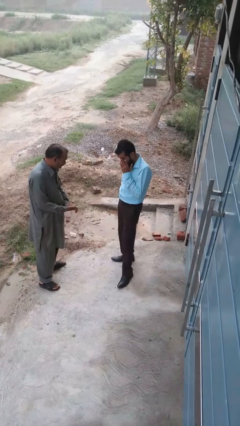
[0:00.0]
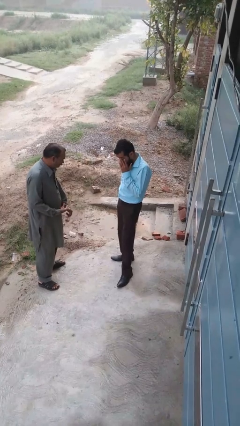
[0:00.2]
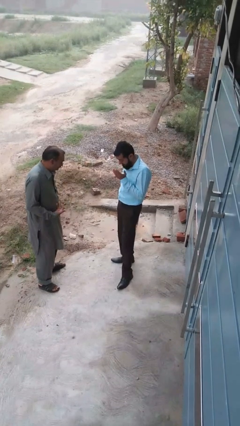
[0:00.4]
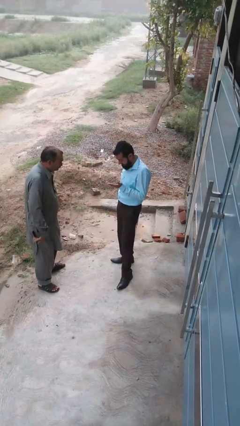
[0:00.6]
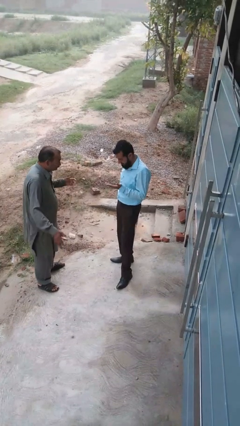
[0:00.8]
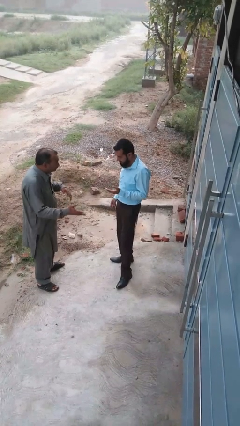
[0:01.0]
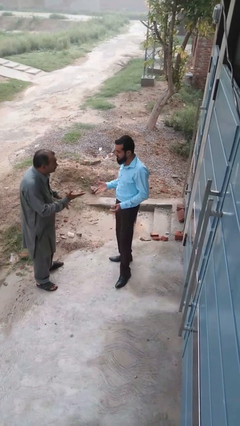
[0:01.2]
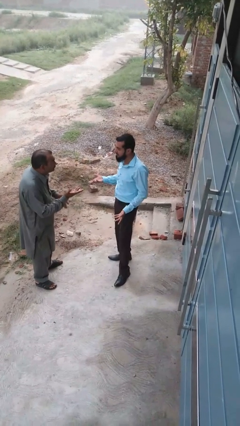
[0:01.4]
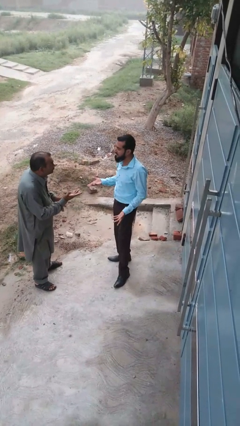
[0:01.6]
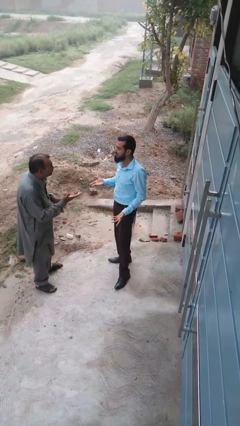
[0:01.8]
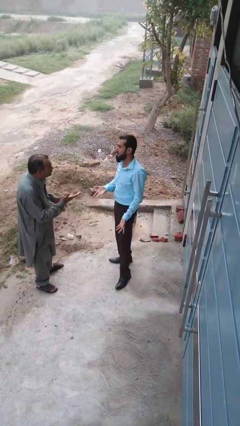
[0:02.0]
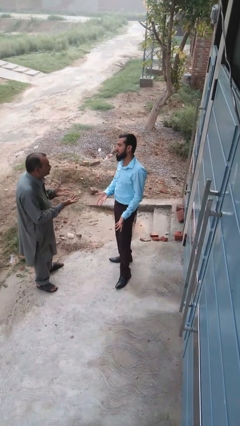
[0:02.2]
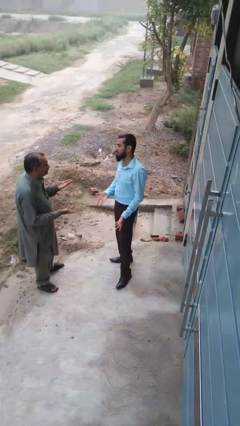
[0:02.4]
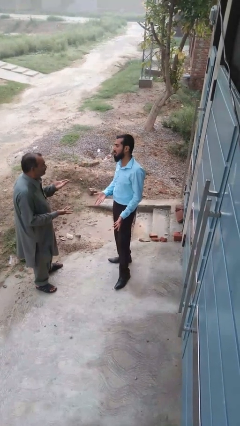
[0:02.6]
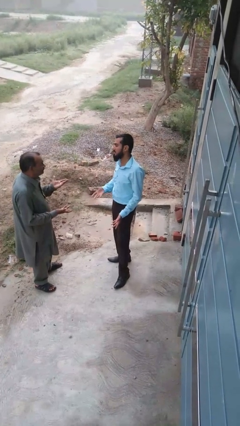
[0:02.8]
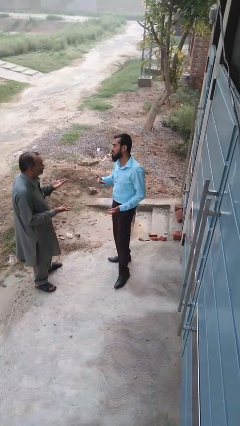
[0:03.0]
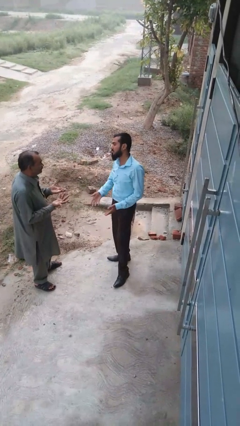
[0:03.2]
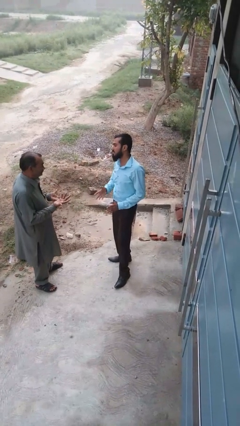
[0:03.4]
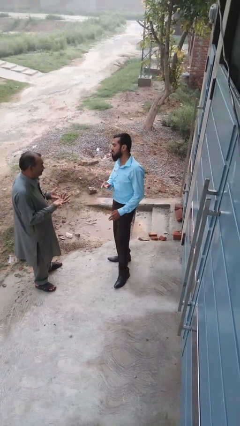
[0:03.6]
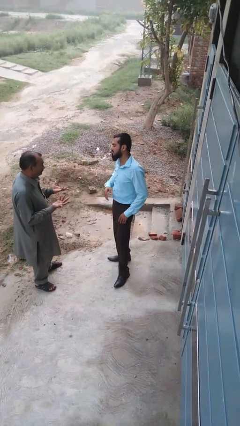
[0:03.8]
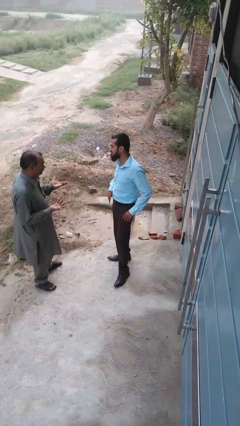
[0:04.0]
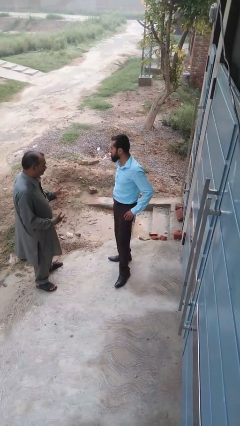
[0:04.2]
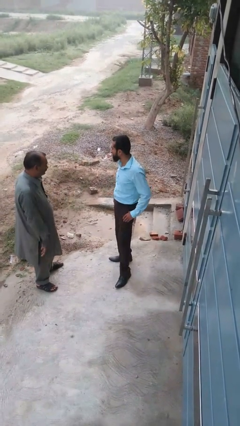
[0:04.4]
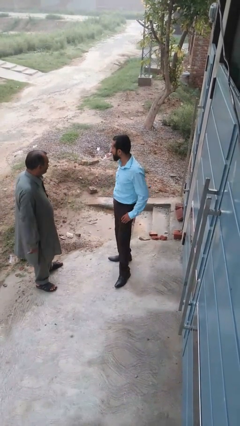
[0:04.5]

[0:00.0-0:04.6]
person talks to person

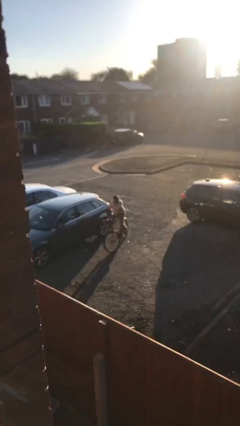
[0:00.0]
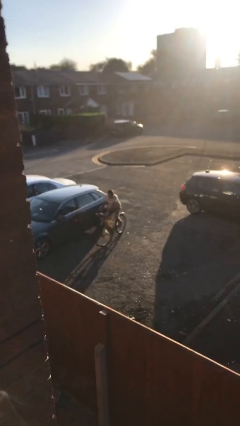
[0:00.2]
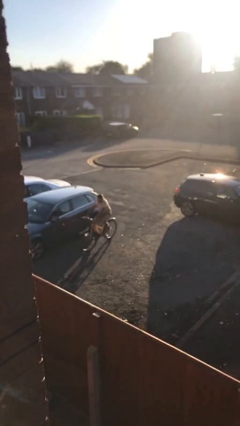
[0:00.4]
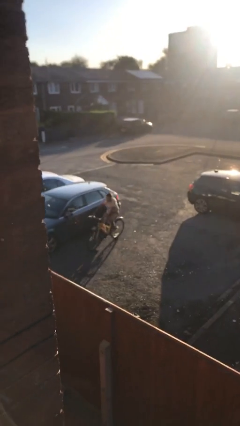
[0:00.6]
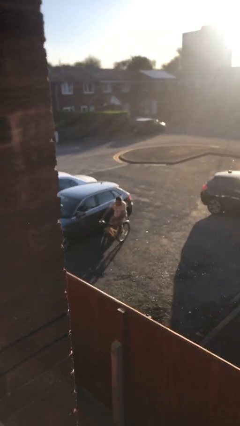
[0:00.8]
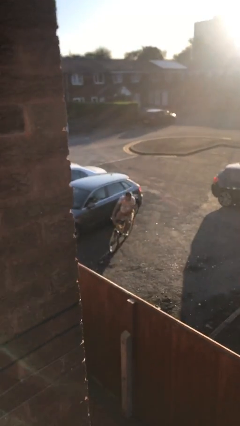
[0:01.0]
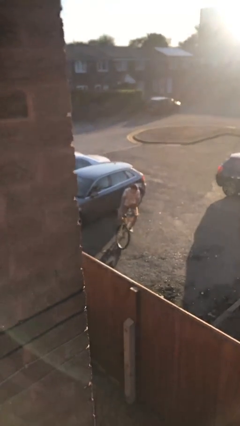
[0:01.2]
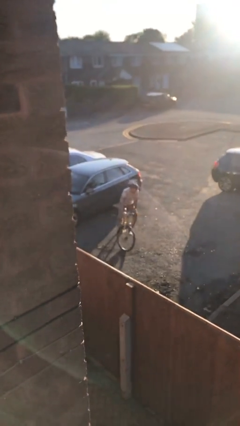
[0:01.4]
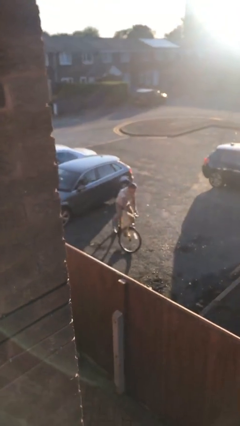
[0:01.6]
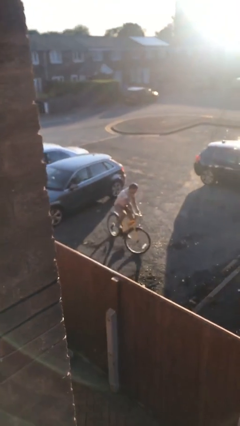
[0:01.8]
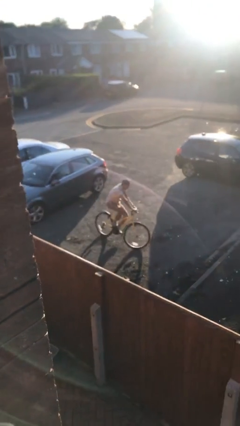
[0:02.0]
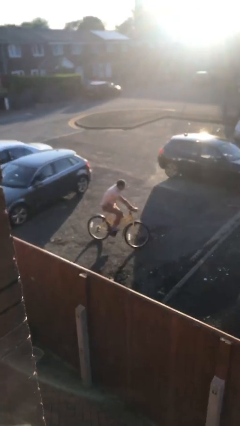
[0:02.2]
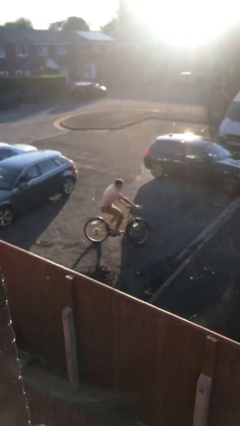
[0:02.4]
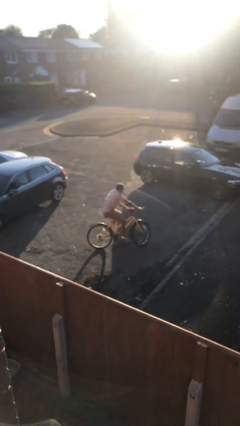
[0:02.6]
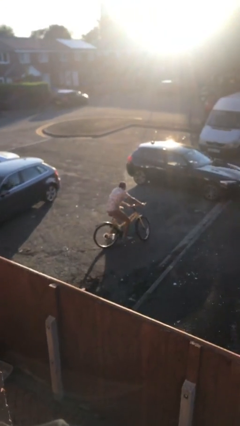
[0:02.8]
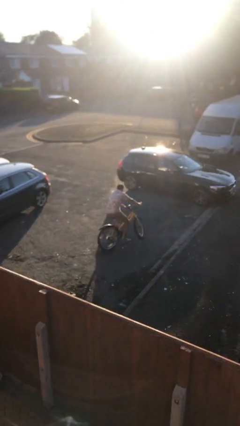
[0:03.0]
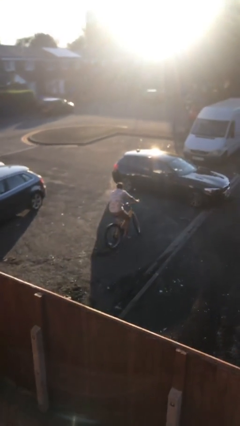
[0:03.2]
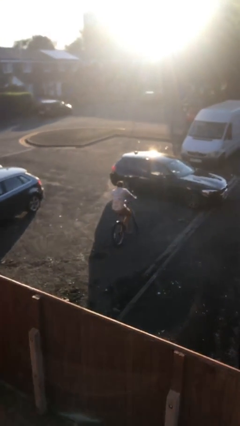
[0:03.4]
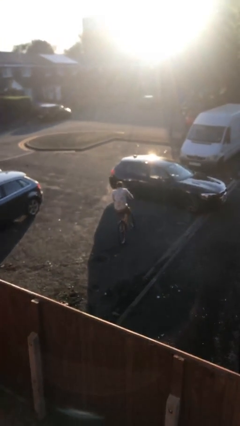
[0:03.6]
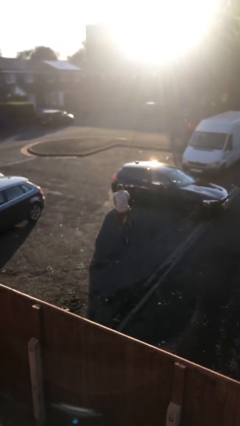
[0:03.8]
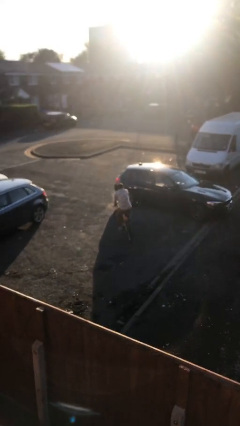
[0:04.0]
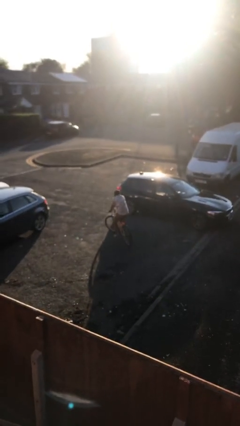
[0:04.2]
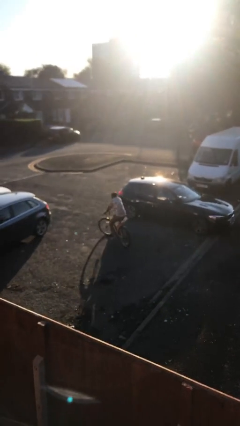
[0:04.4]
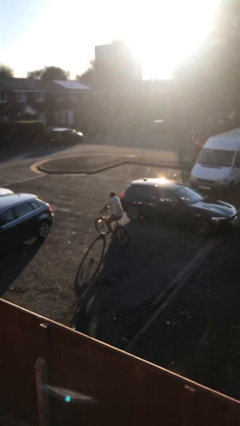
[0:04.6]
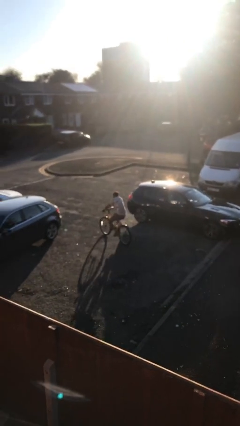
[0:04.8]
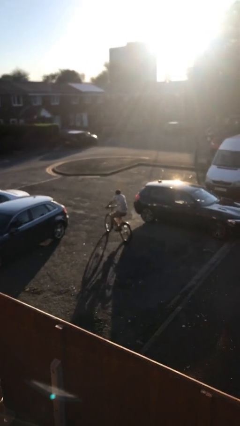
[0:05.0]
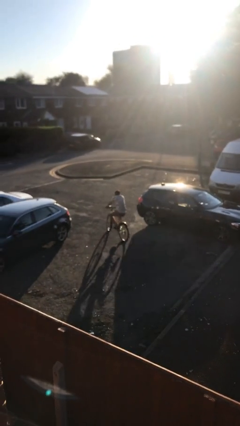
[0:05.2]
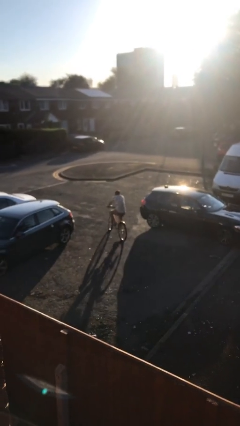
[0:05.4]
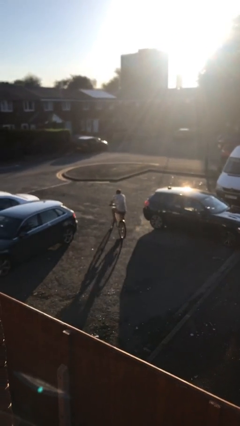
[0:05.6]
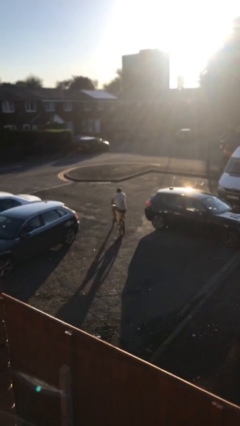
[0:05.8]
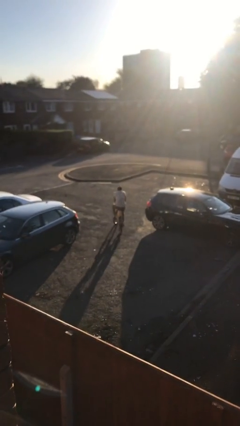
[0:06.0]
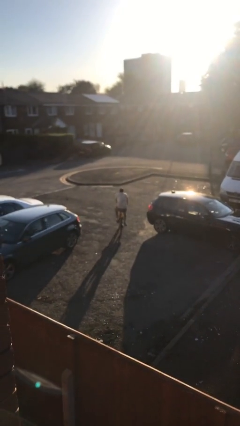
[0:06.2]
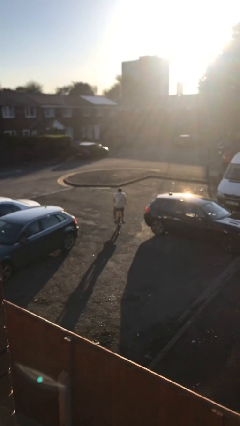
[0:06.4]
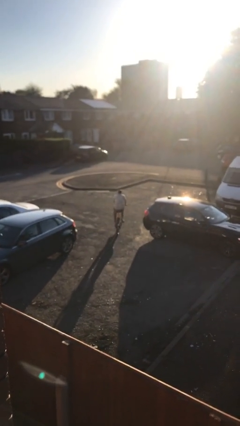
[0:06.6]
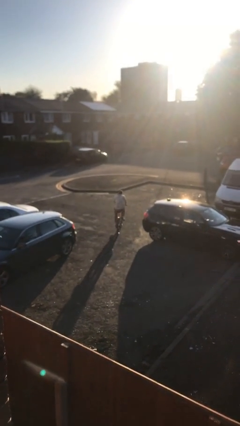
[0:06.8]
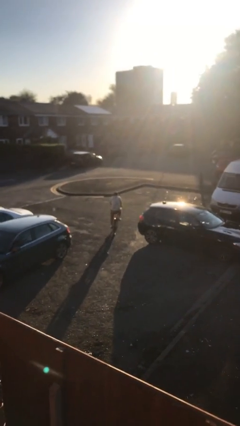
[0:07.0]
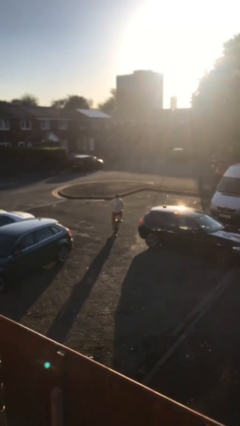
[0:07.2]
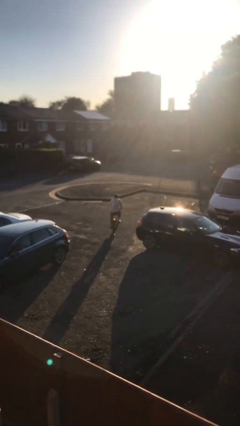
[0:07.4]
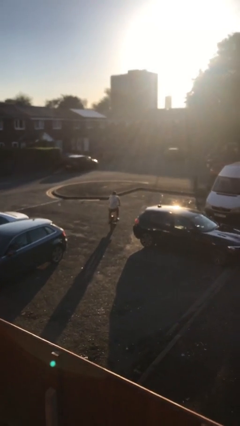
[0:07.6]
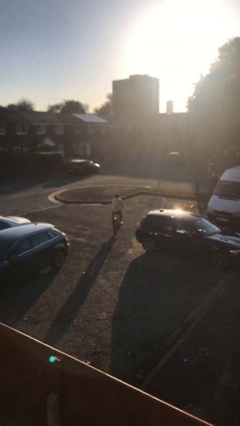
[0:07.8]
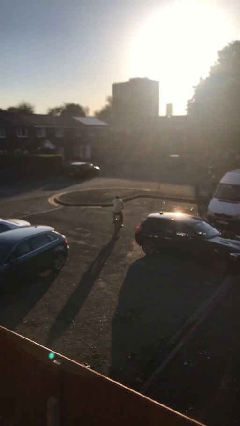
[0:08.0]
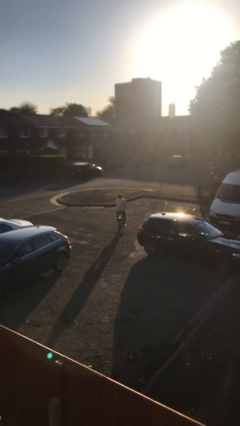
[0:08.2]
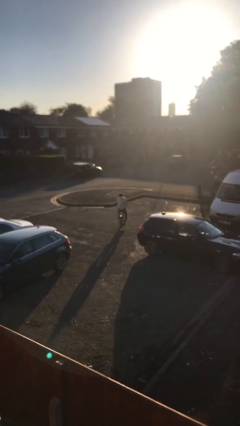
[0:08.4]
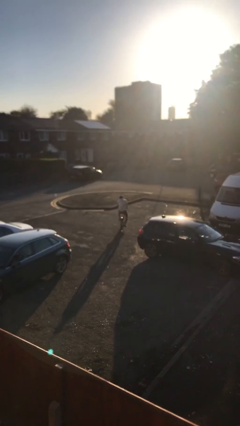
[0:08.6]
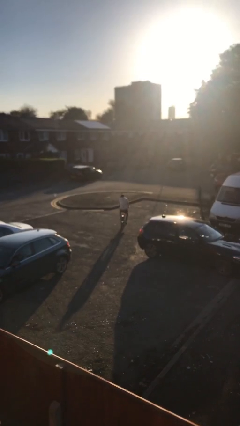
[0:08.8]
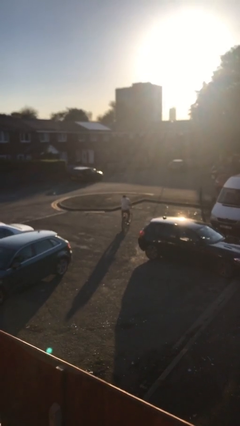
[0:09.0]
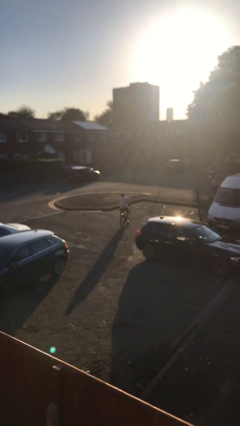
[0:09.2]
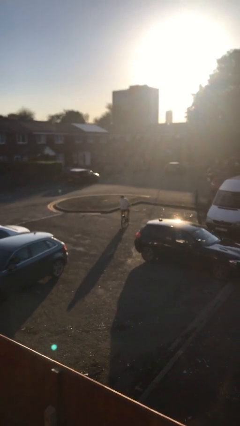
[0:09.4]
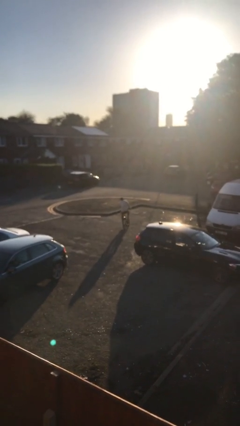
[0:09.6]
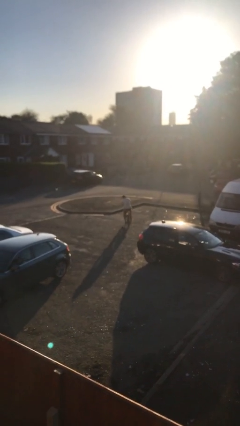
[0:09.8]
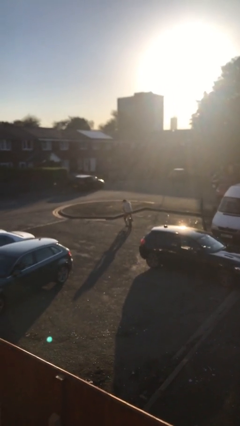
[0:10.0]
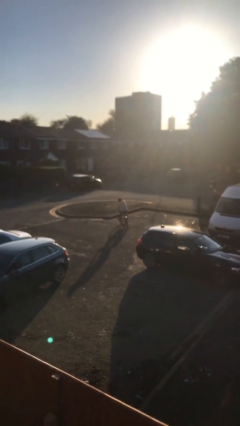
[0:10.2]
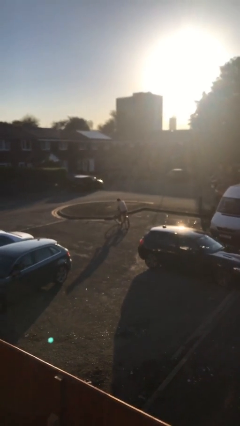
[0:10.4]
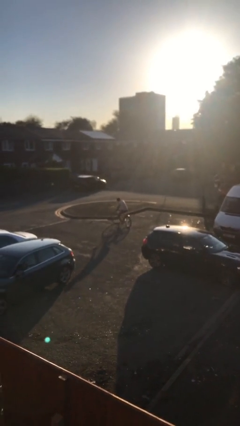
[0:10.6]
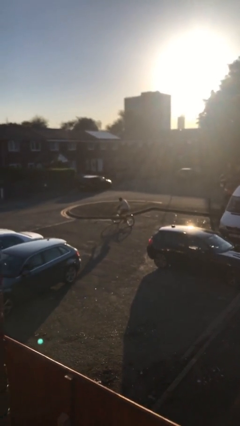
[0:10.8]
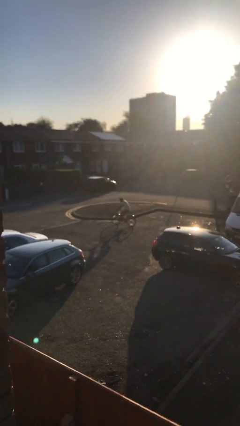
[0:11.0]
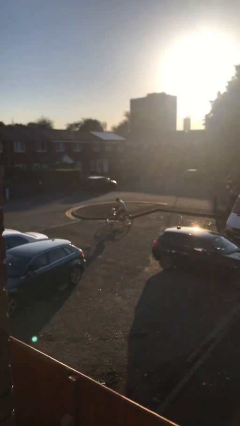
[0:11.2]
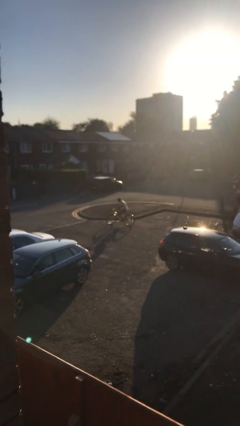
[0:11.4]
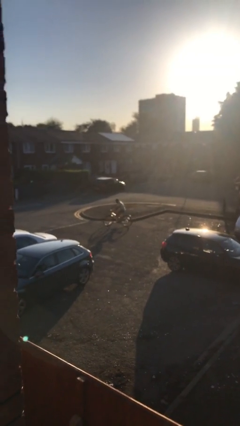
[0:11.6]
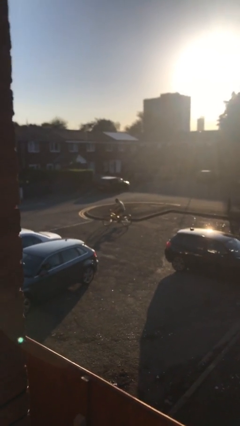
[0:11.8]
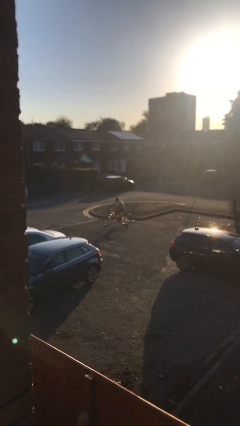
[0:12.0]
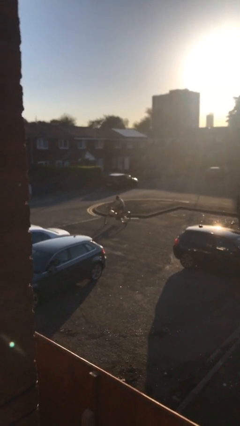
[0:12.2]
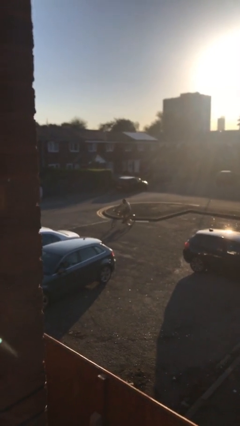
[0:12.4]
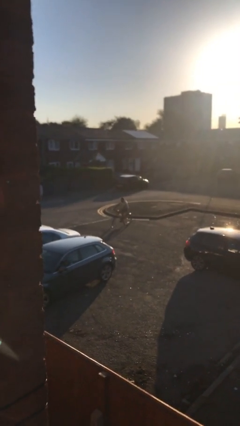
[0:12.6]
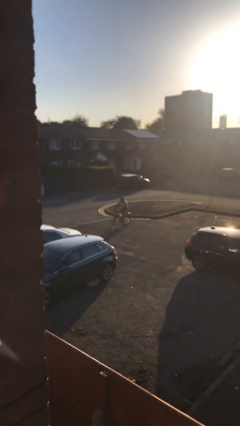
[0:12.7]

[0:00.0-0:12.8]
person rides bicycle

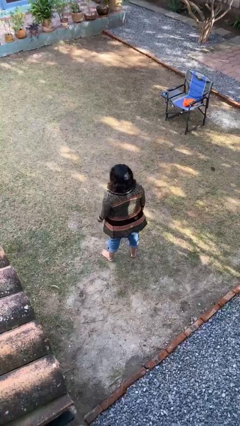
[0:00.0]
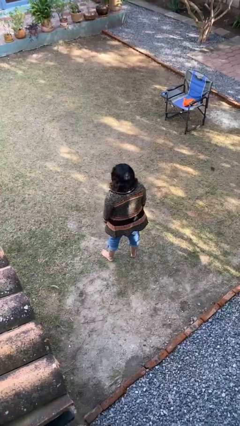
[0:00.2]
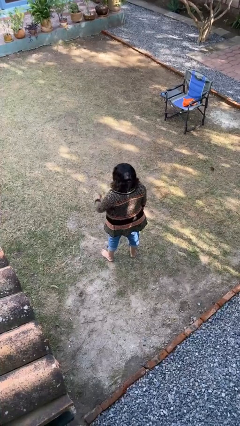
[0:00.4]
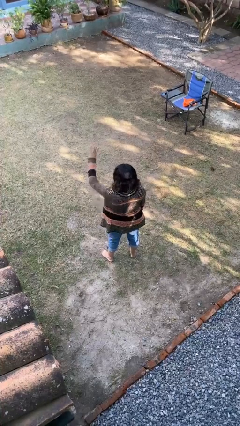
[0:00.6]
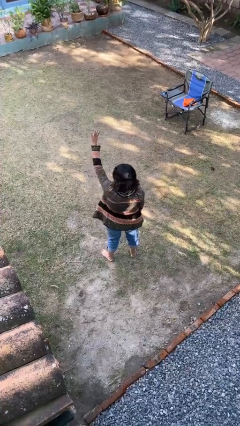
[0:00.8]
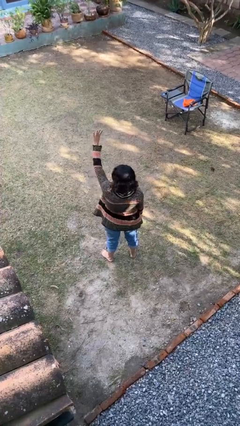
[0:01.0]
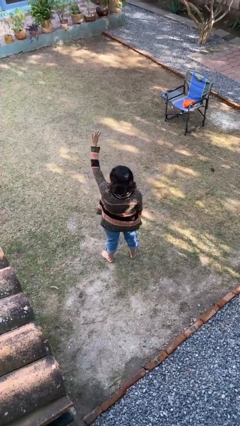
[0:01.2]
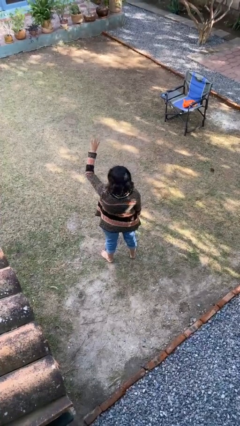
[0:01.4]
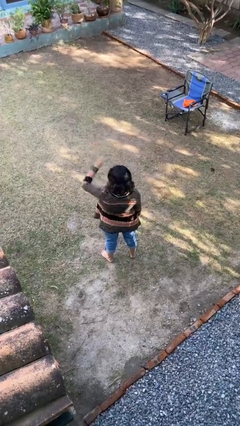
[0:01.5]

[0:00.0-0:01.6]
person gestures number four
